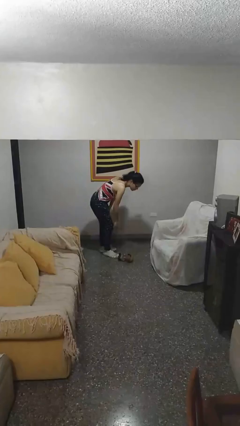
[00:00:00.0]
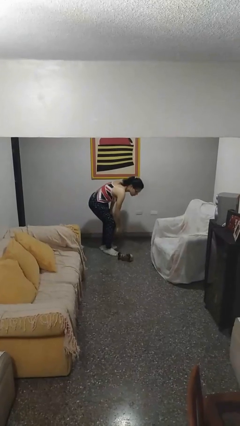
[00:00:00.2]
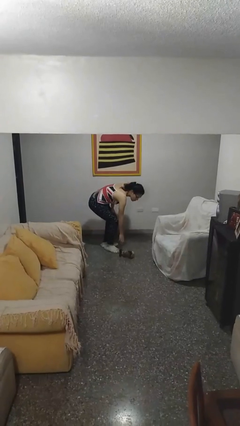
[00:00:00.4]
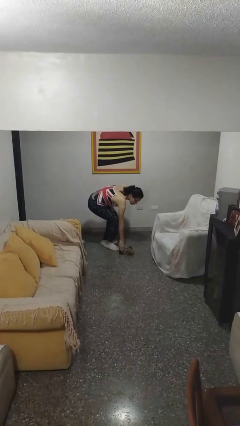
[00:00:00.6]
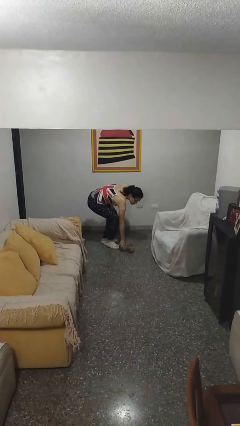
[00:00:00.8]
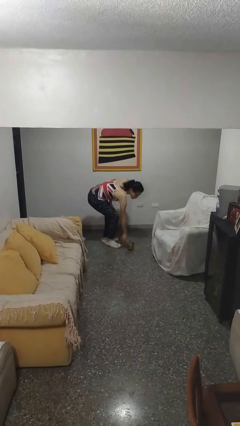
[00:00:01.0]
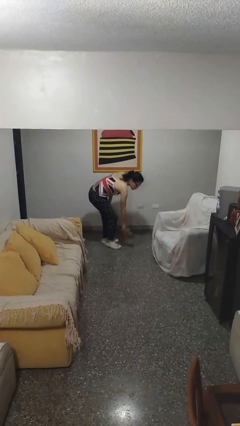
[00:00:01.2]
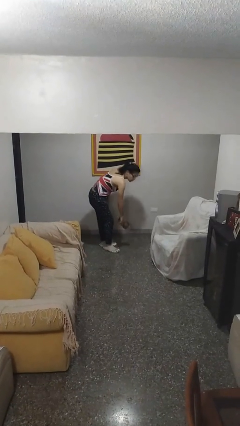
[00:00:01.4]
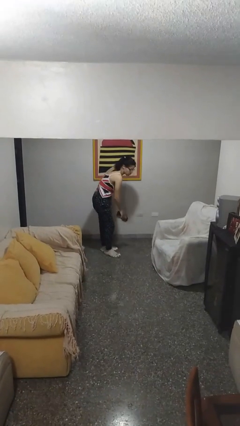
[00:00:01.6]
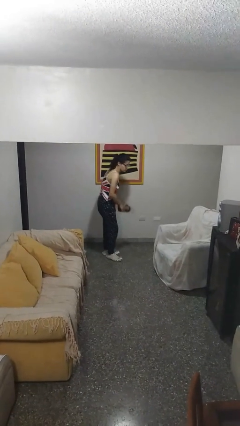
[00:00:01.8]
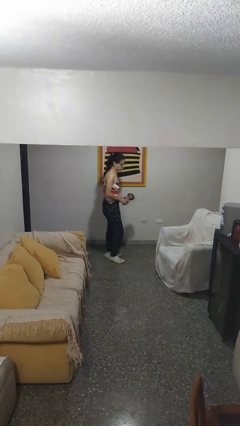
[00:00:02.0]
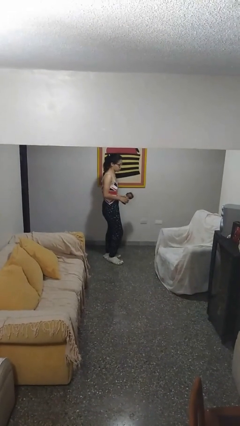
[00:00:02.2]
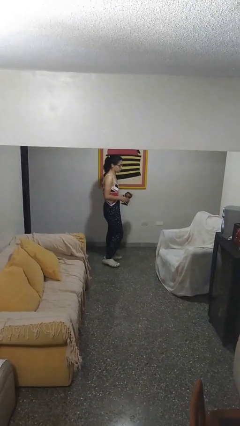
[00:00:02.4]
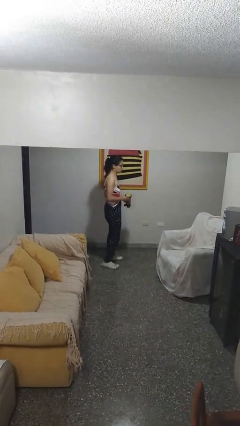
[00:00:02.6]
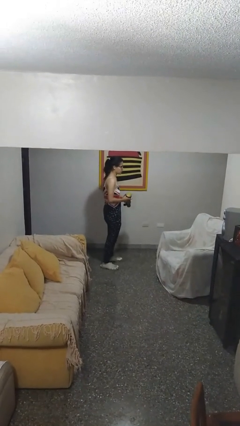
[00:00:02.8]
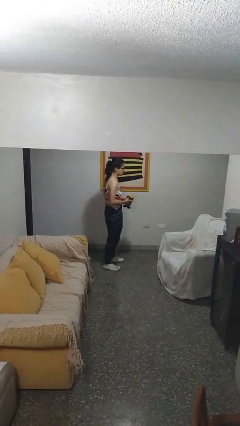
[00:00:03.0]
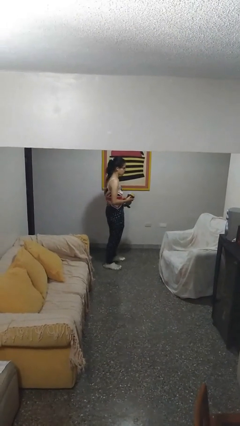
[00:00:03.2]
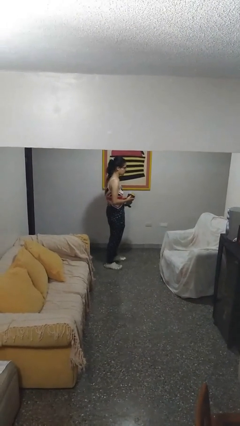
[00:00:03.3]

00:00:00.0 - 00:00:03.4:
person picks up object from floor

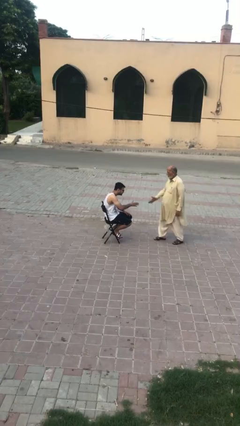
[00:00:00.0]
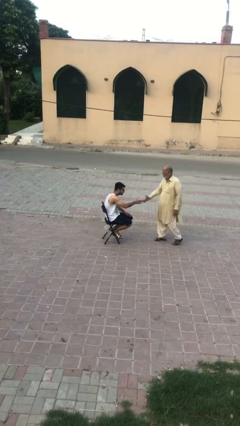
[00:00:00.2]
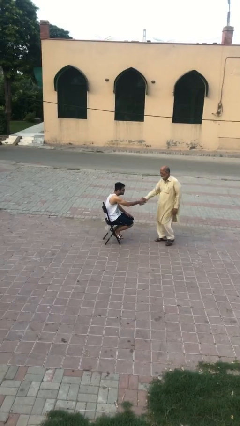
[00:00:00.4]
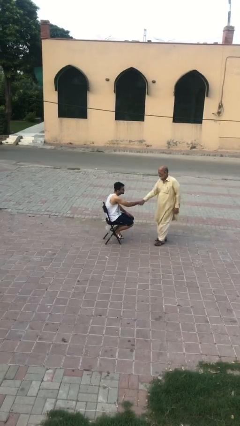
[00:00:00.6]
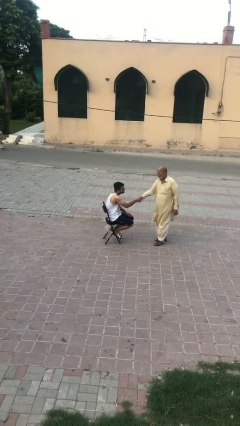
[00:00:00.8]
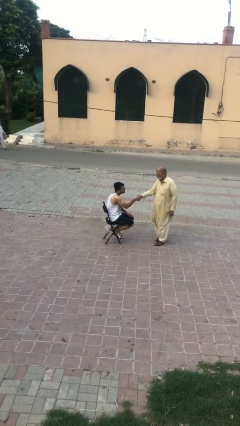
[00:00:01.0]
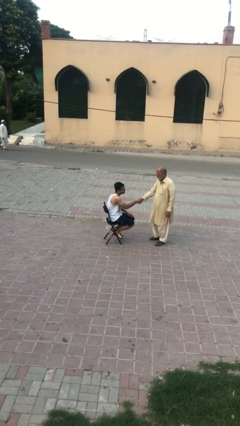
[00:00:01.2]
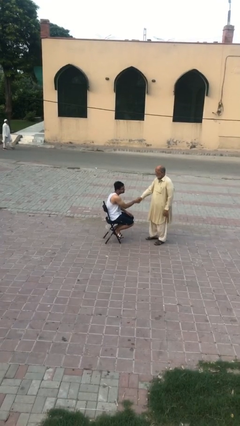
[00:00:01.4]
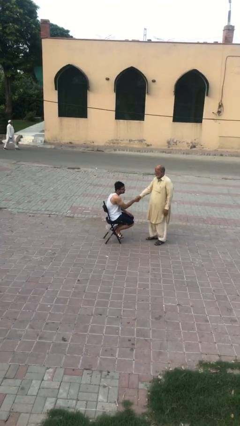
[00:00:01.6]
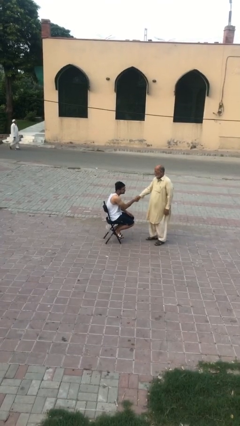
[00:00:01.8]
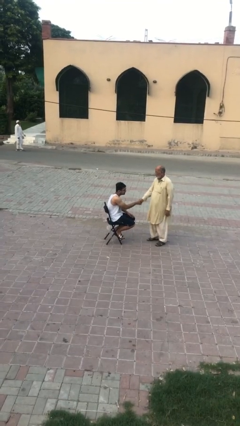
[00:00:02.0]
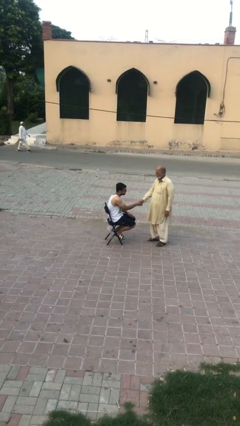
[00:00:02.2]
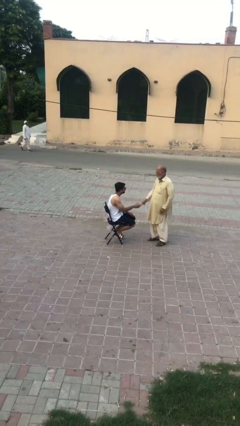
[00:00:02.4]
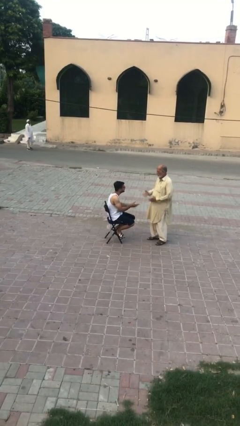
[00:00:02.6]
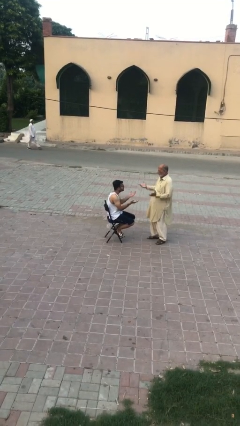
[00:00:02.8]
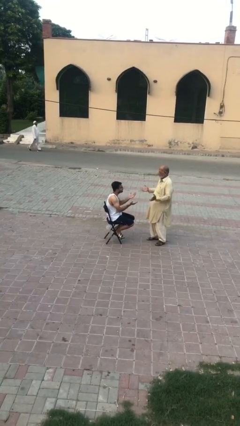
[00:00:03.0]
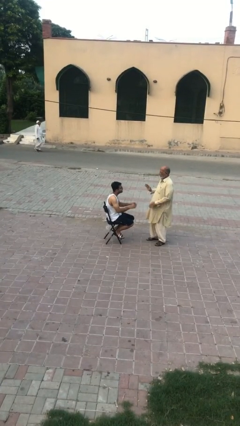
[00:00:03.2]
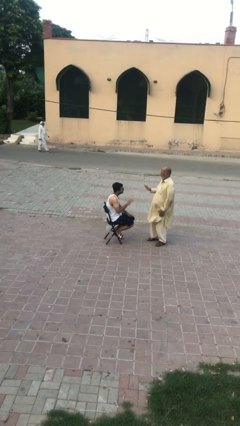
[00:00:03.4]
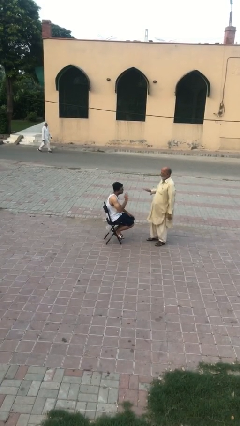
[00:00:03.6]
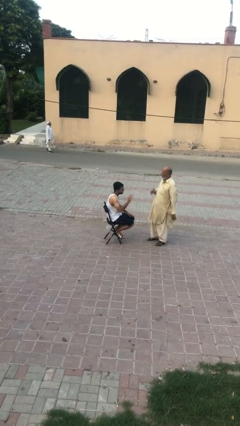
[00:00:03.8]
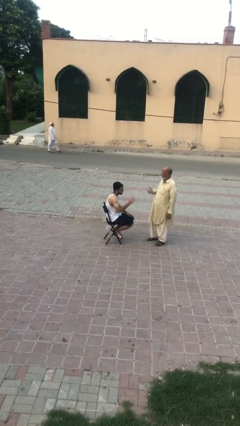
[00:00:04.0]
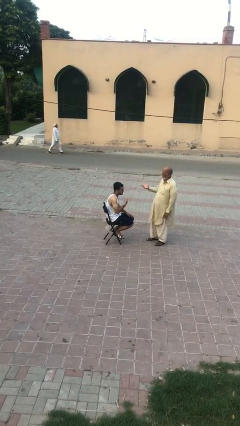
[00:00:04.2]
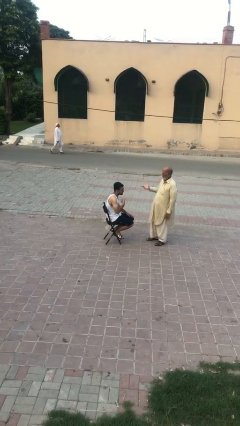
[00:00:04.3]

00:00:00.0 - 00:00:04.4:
person shakes hand

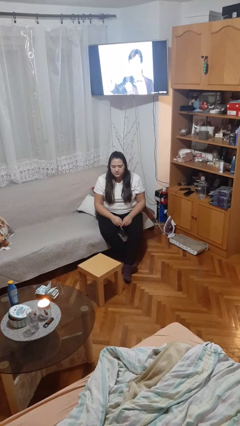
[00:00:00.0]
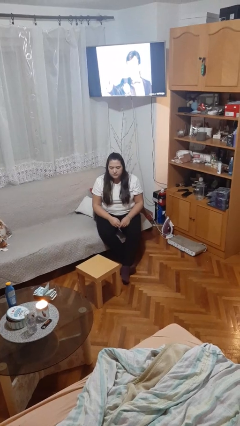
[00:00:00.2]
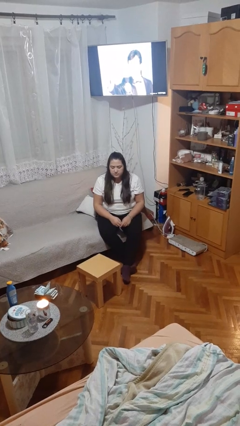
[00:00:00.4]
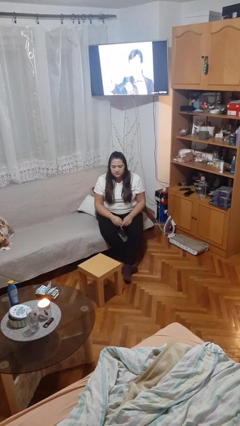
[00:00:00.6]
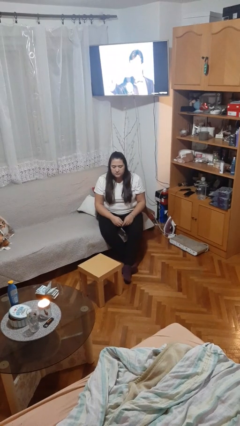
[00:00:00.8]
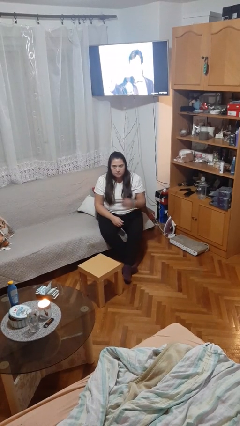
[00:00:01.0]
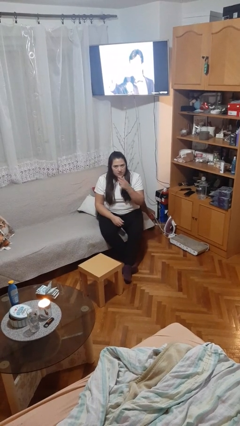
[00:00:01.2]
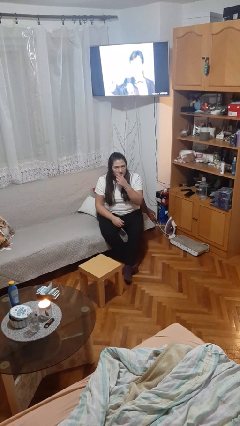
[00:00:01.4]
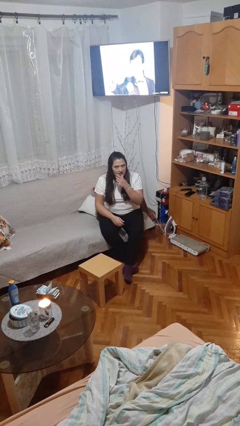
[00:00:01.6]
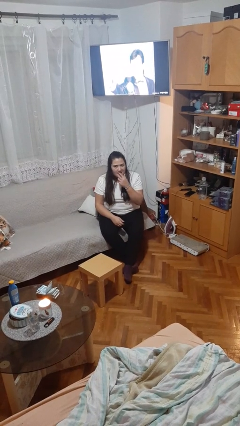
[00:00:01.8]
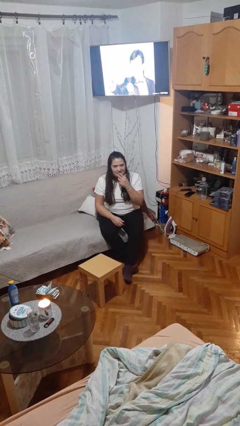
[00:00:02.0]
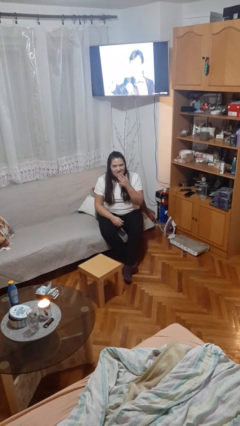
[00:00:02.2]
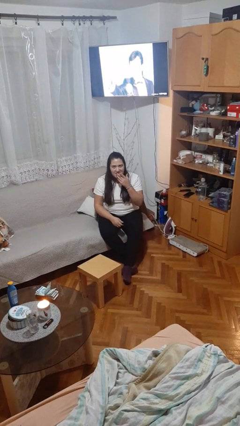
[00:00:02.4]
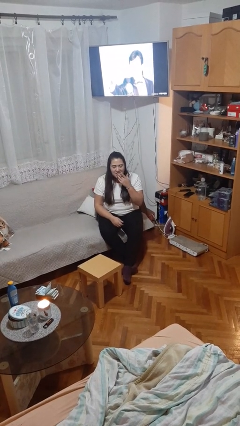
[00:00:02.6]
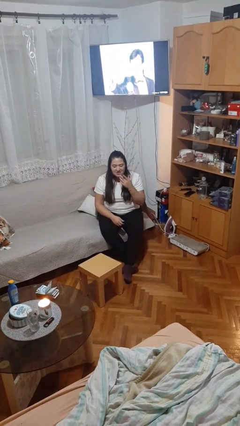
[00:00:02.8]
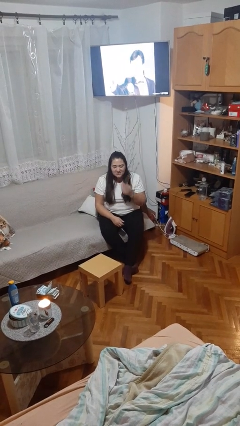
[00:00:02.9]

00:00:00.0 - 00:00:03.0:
person licks fingers

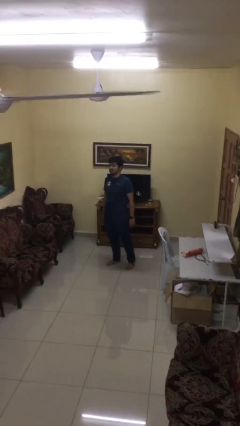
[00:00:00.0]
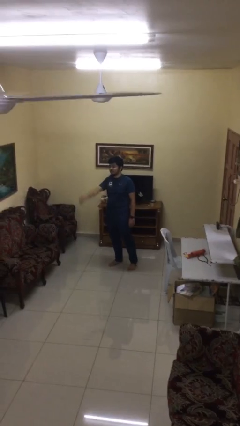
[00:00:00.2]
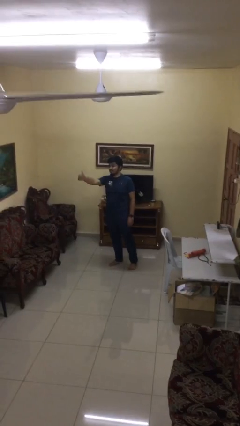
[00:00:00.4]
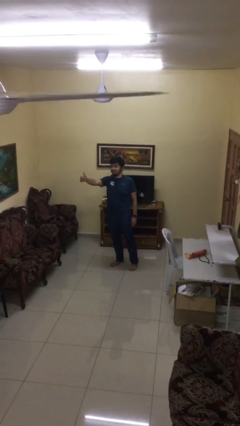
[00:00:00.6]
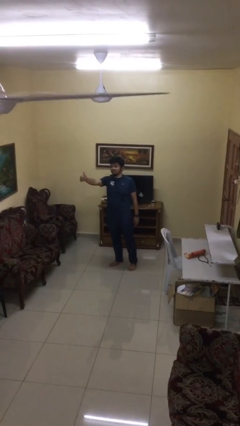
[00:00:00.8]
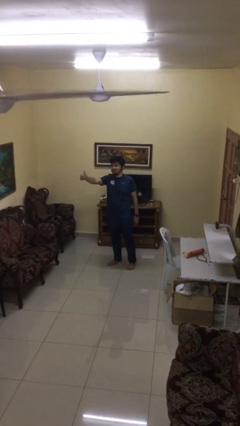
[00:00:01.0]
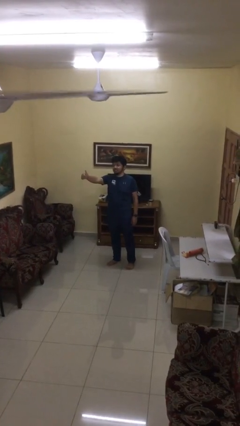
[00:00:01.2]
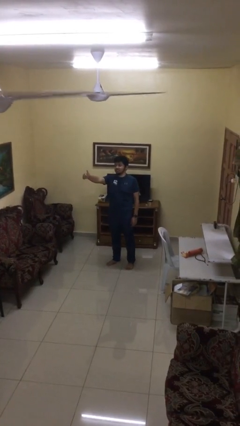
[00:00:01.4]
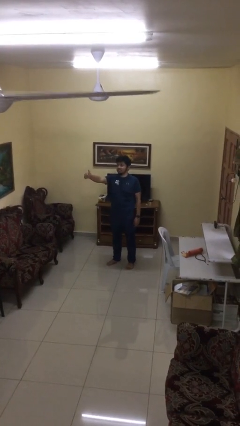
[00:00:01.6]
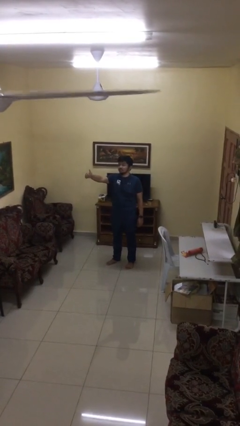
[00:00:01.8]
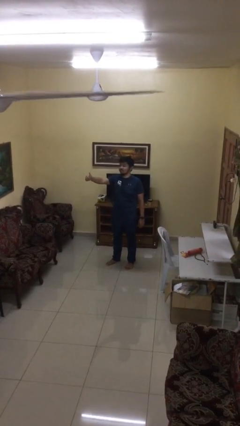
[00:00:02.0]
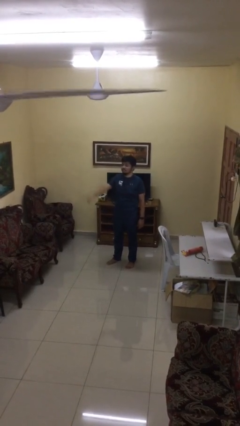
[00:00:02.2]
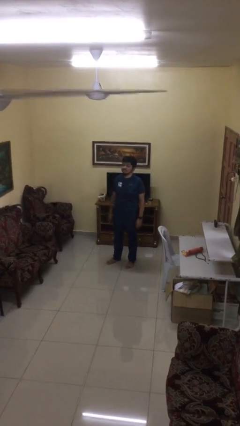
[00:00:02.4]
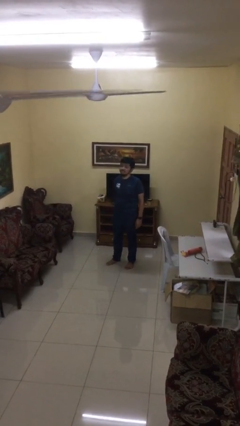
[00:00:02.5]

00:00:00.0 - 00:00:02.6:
person gestures thumbs up

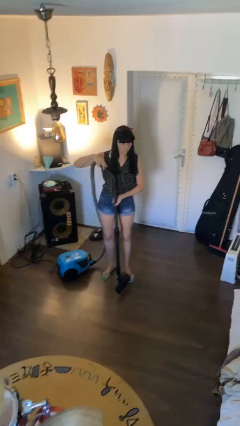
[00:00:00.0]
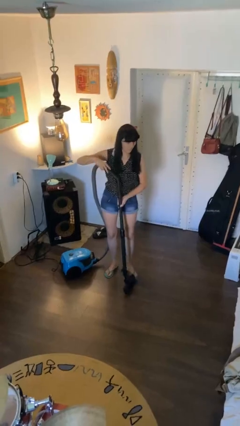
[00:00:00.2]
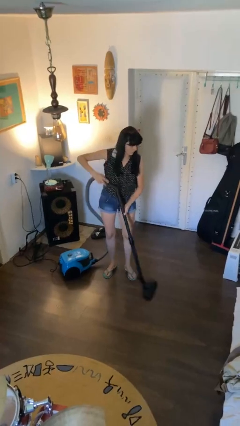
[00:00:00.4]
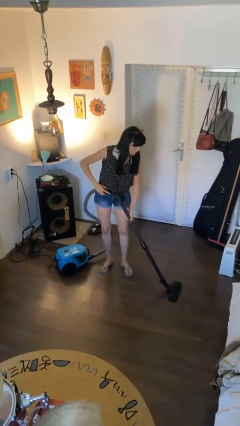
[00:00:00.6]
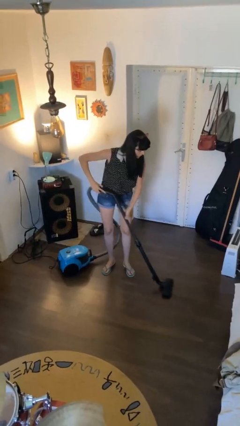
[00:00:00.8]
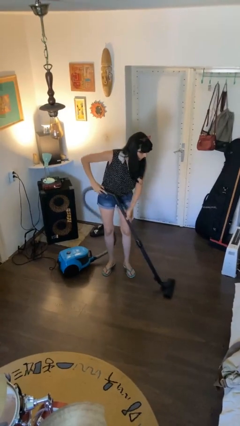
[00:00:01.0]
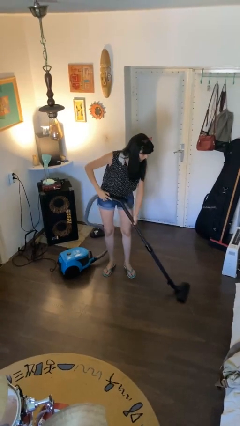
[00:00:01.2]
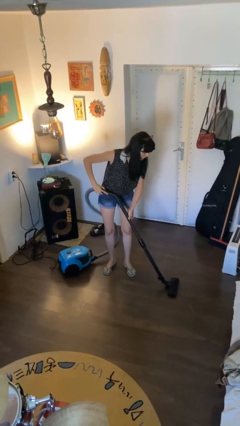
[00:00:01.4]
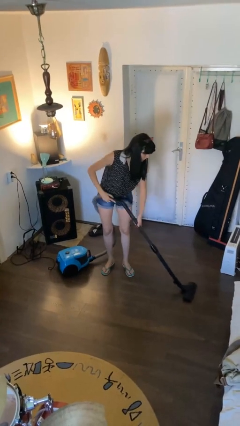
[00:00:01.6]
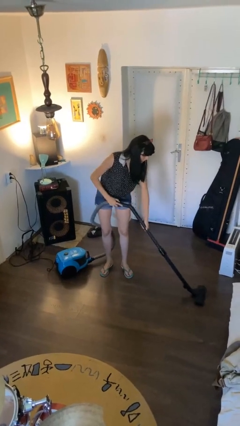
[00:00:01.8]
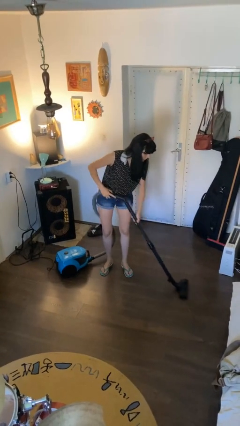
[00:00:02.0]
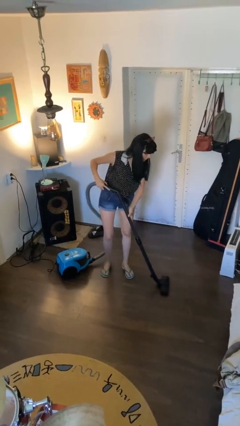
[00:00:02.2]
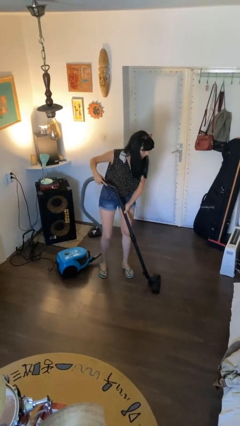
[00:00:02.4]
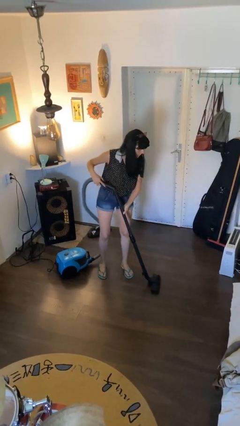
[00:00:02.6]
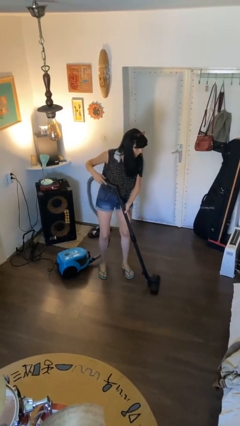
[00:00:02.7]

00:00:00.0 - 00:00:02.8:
person vacuums carpet

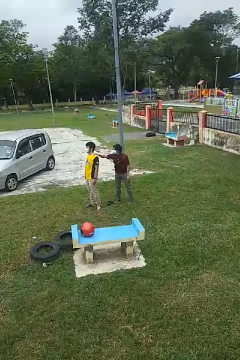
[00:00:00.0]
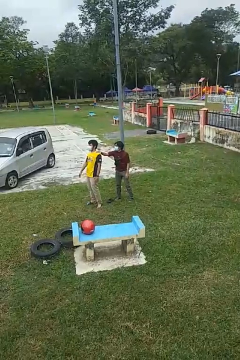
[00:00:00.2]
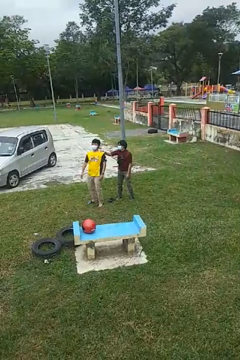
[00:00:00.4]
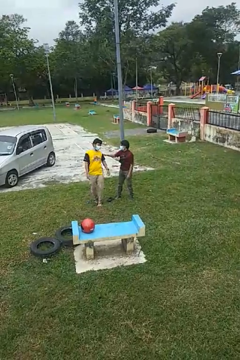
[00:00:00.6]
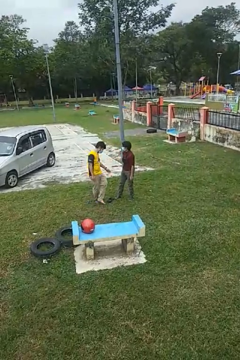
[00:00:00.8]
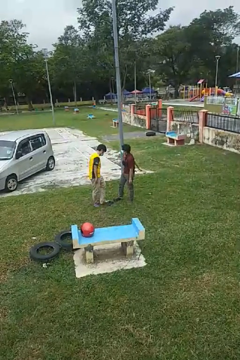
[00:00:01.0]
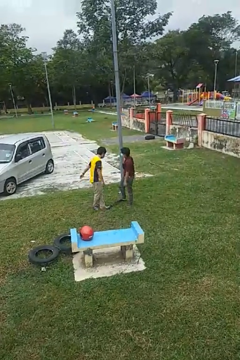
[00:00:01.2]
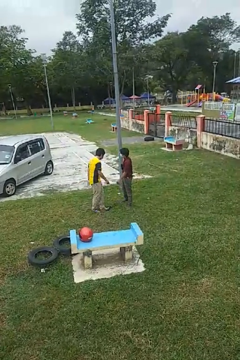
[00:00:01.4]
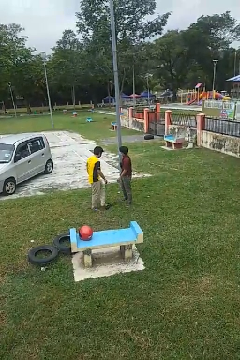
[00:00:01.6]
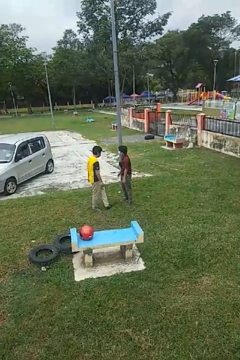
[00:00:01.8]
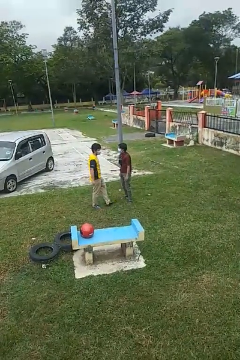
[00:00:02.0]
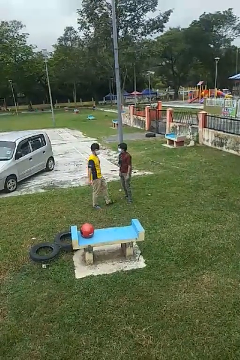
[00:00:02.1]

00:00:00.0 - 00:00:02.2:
person spins person around
